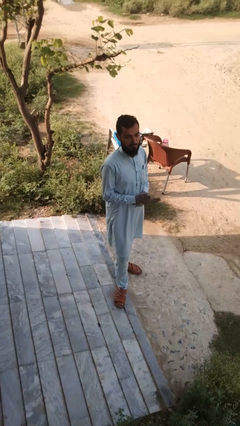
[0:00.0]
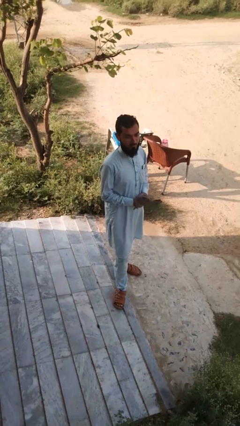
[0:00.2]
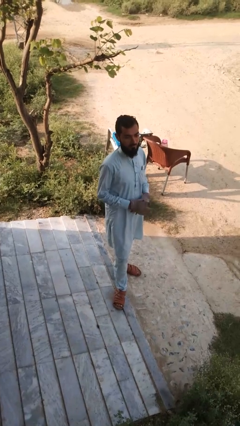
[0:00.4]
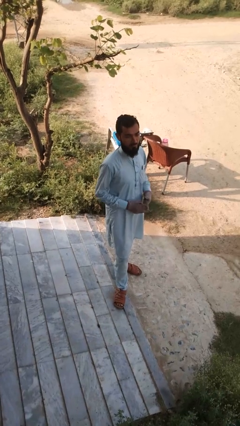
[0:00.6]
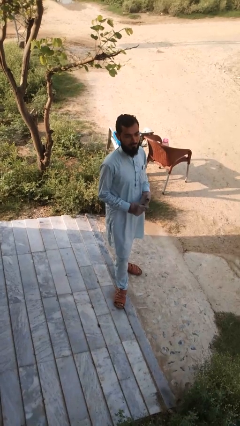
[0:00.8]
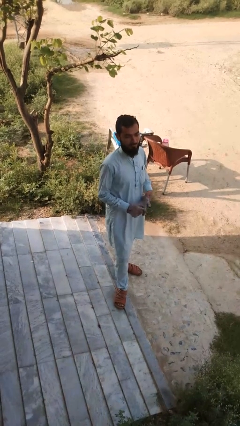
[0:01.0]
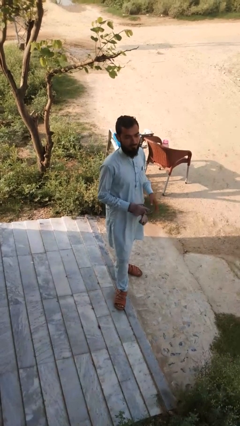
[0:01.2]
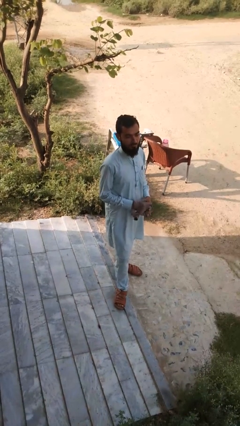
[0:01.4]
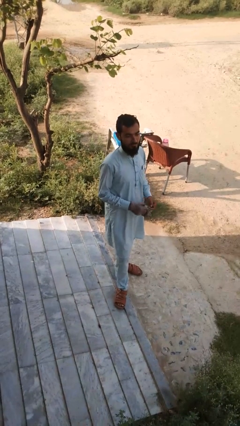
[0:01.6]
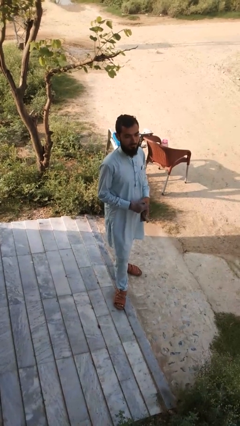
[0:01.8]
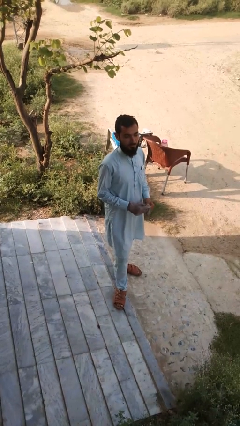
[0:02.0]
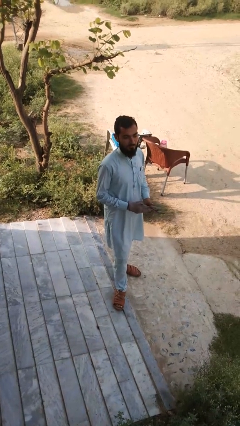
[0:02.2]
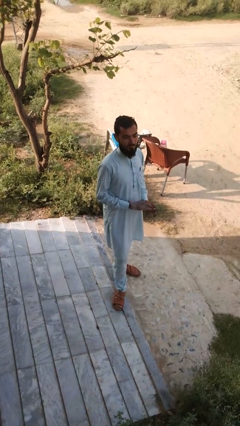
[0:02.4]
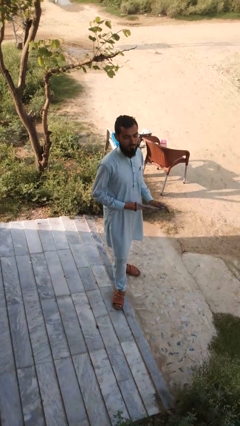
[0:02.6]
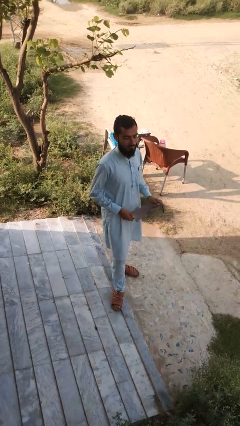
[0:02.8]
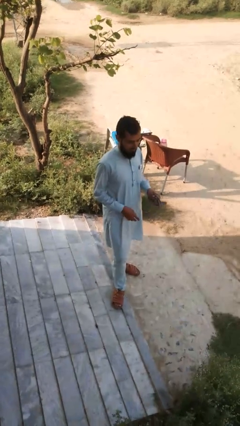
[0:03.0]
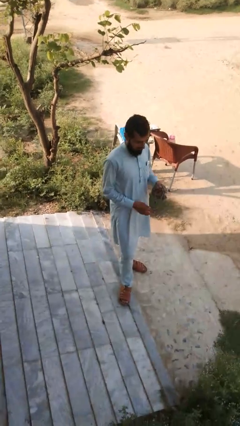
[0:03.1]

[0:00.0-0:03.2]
person takes off gloves

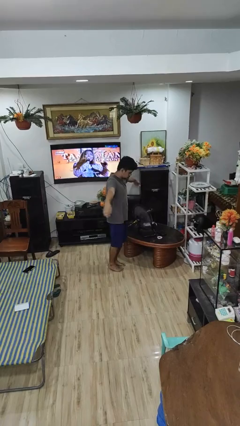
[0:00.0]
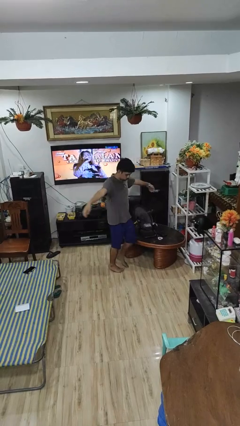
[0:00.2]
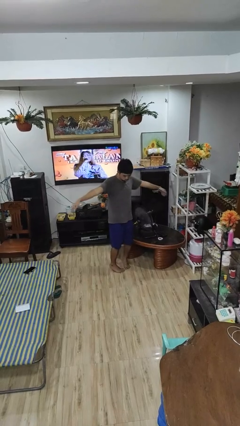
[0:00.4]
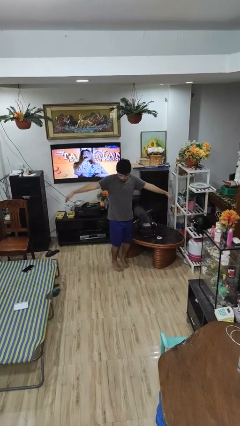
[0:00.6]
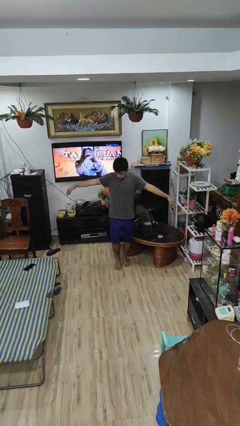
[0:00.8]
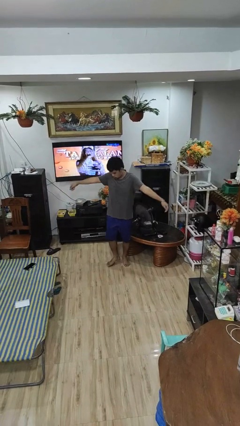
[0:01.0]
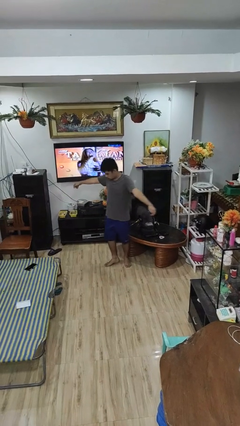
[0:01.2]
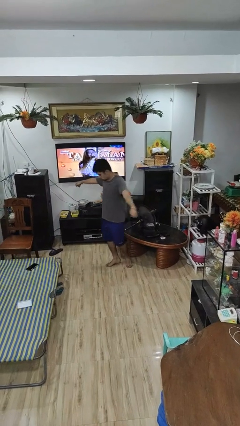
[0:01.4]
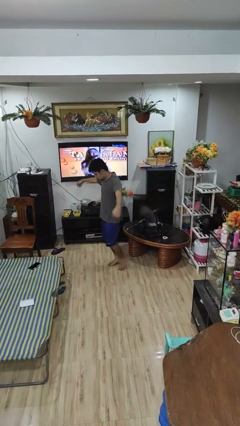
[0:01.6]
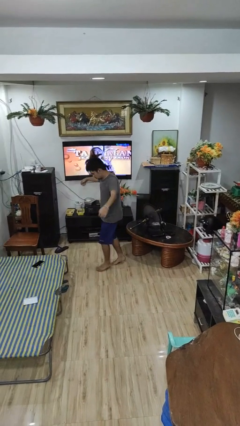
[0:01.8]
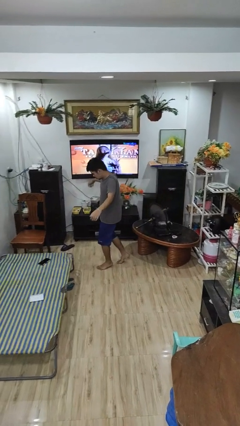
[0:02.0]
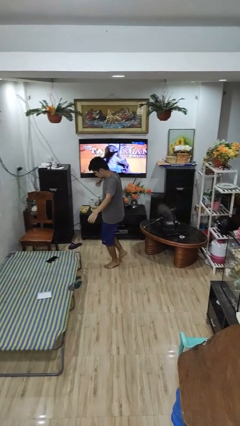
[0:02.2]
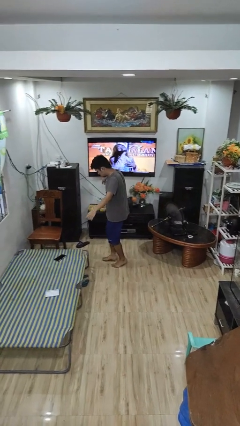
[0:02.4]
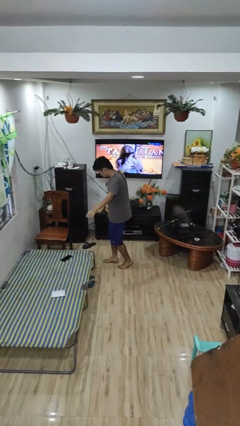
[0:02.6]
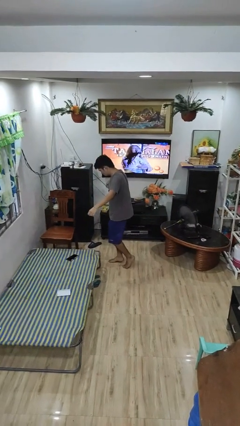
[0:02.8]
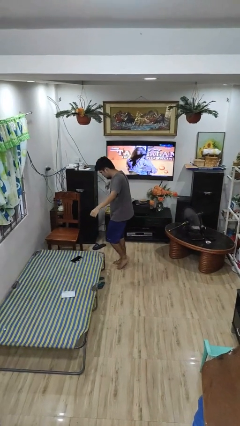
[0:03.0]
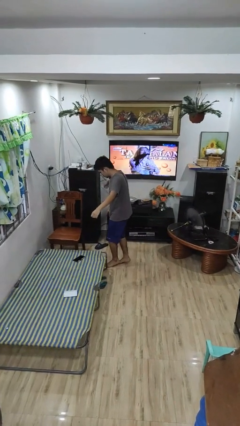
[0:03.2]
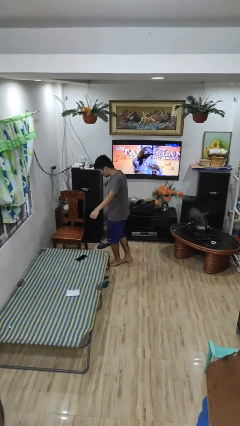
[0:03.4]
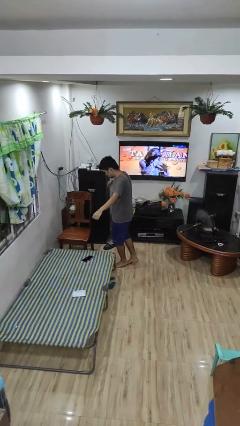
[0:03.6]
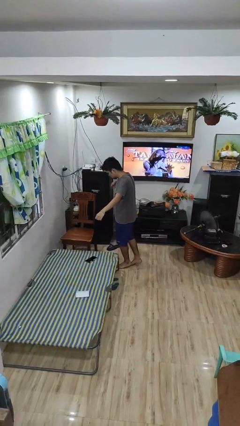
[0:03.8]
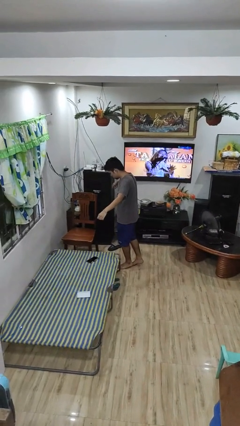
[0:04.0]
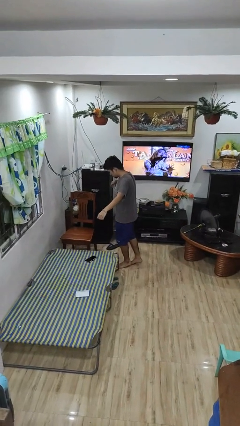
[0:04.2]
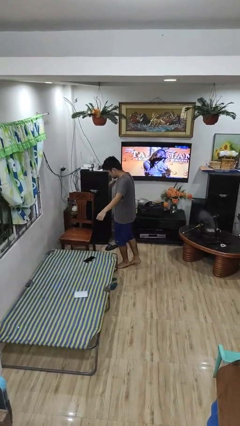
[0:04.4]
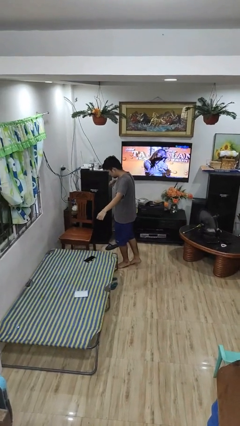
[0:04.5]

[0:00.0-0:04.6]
person walks tiptoe

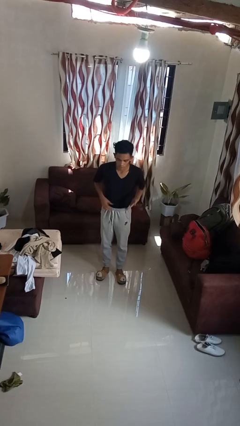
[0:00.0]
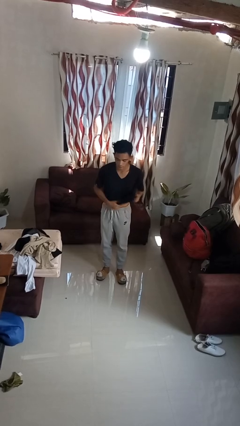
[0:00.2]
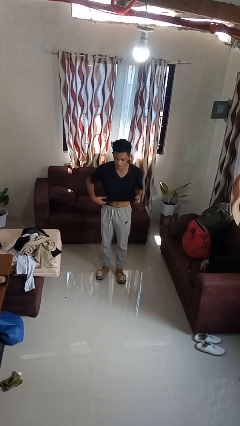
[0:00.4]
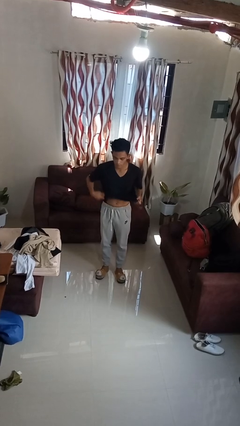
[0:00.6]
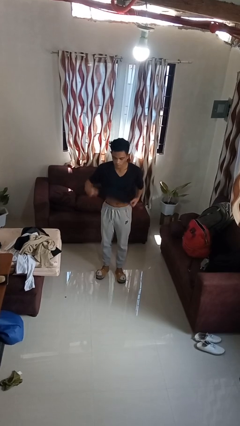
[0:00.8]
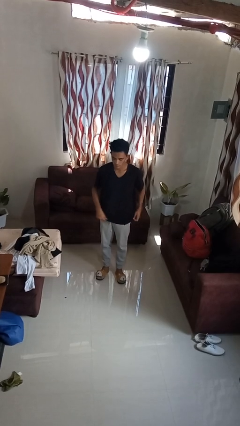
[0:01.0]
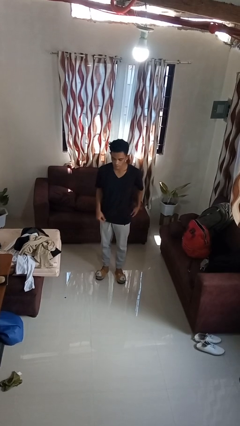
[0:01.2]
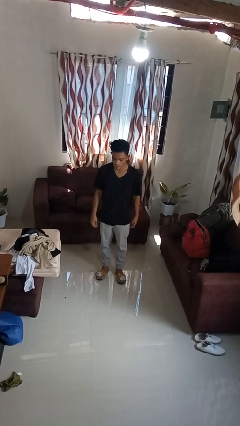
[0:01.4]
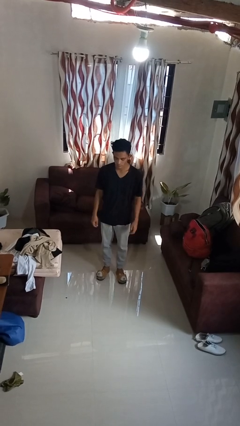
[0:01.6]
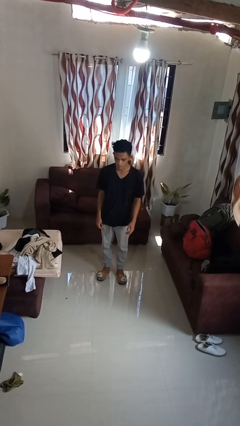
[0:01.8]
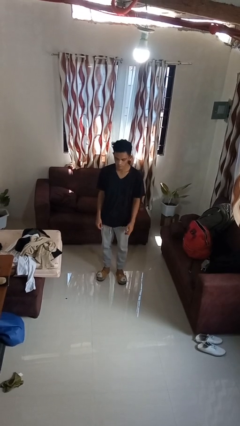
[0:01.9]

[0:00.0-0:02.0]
person untucks shirt

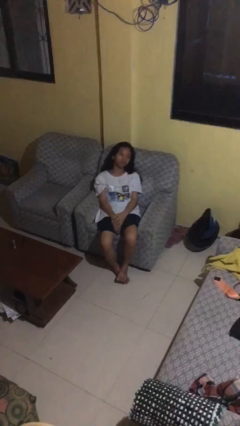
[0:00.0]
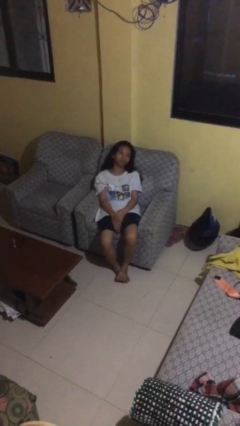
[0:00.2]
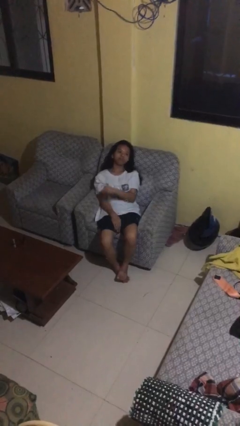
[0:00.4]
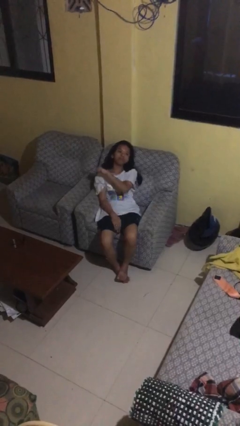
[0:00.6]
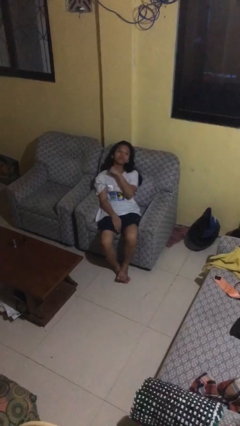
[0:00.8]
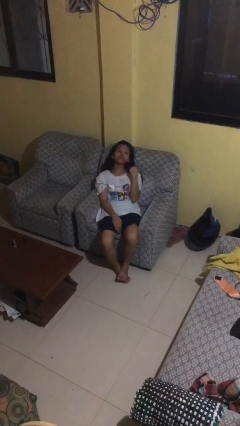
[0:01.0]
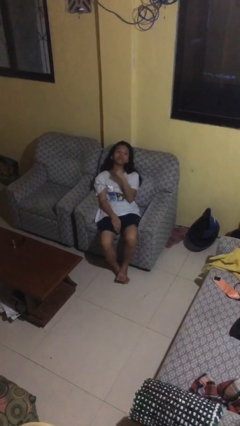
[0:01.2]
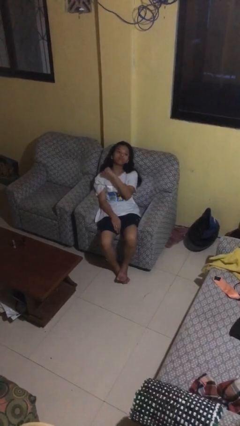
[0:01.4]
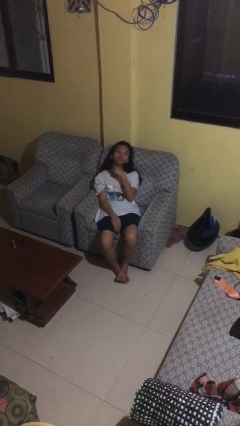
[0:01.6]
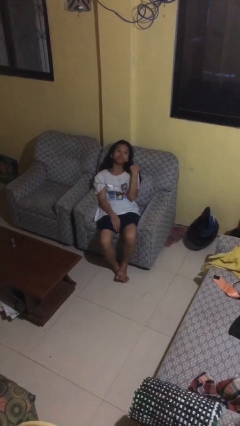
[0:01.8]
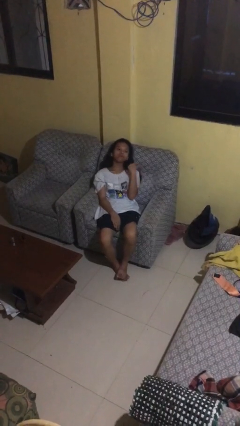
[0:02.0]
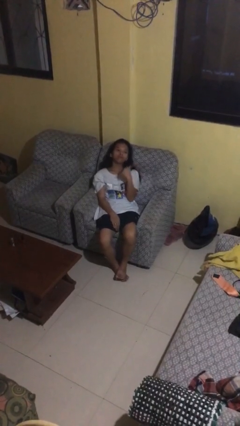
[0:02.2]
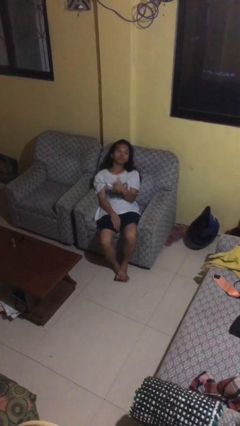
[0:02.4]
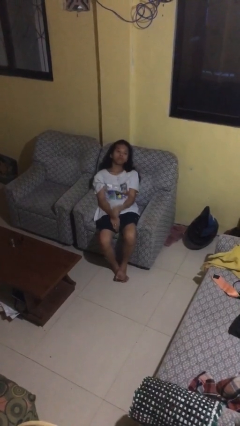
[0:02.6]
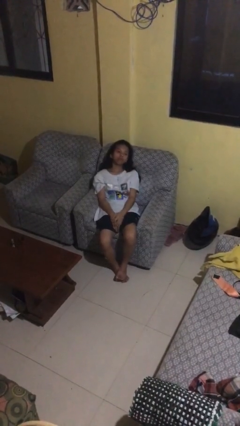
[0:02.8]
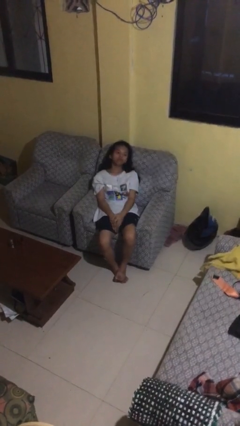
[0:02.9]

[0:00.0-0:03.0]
person gestures cut

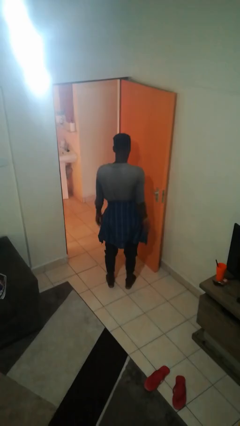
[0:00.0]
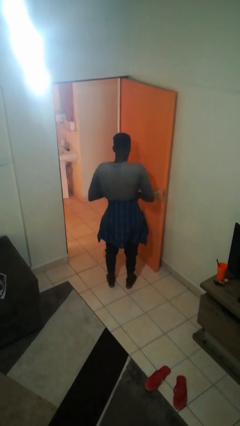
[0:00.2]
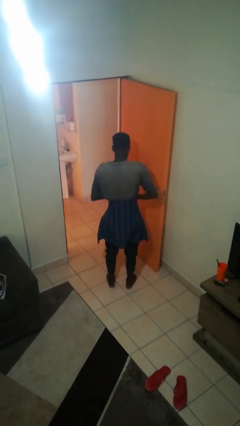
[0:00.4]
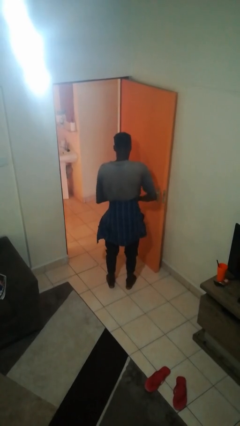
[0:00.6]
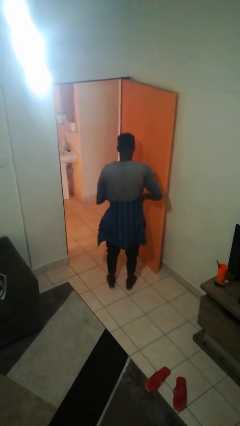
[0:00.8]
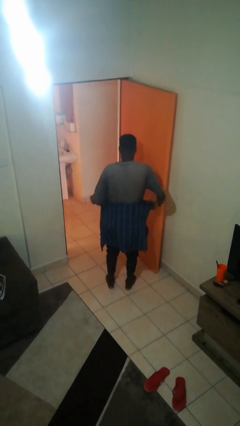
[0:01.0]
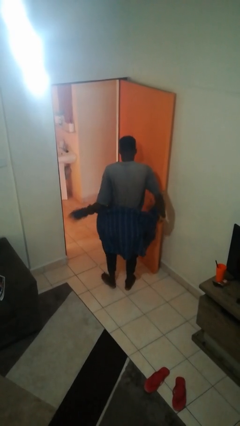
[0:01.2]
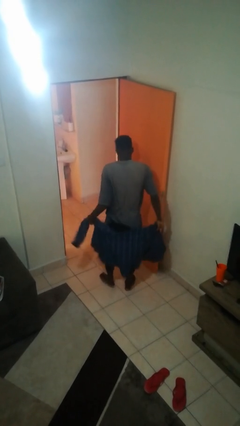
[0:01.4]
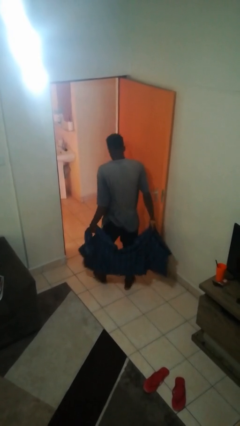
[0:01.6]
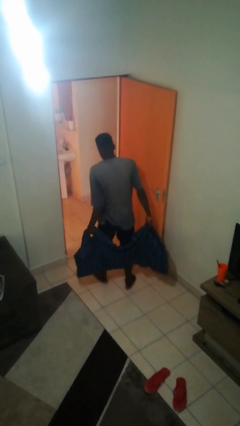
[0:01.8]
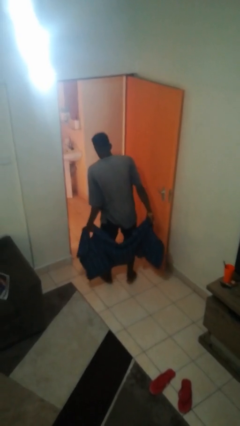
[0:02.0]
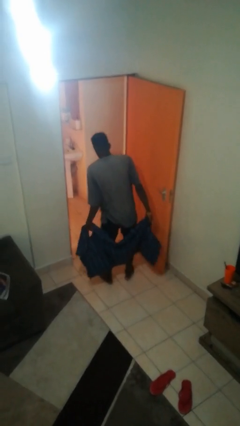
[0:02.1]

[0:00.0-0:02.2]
person unties jacket around waist

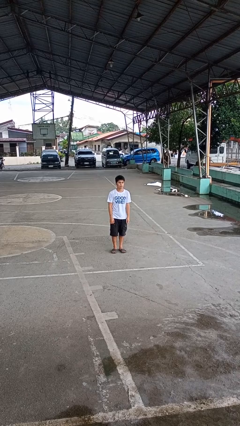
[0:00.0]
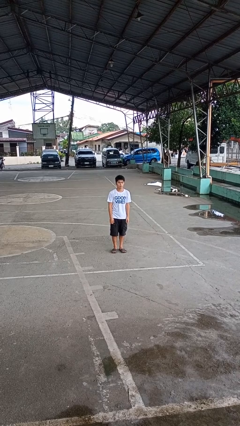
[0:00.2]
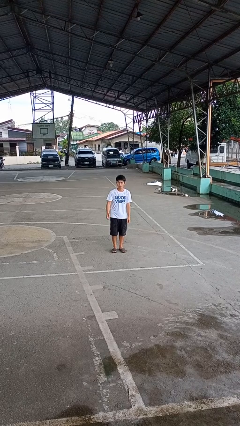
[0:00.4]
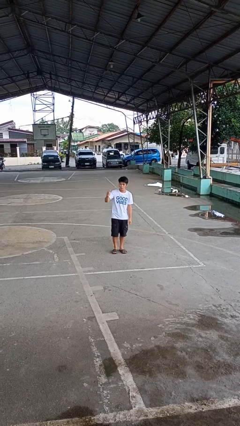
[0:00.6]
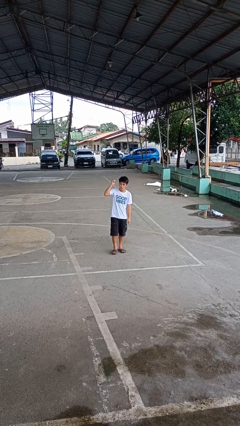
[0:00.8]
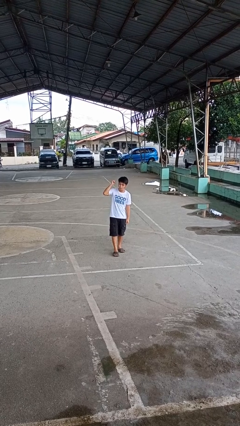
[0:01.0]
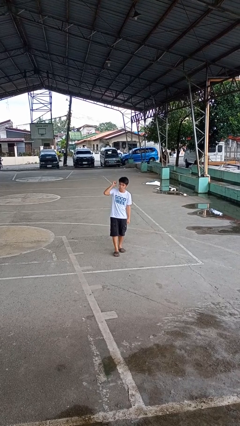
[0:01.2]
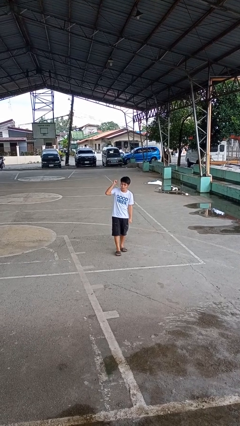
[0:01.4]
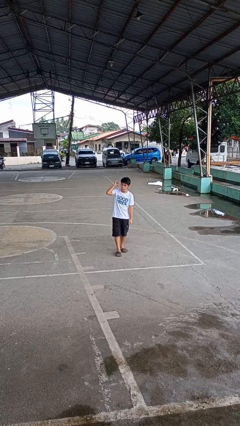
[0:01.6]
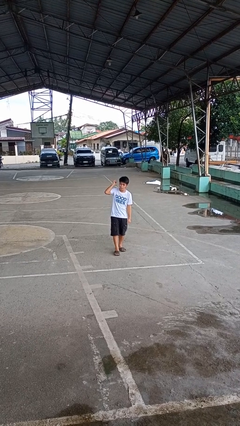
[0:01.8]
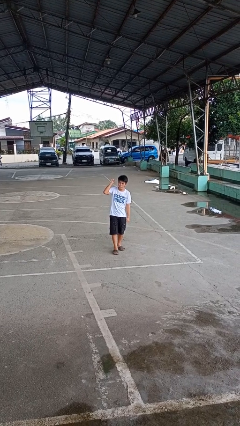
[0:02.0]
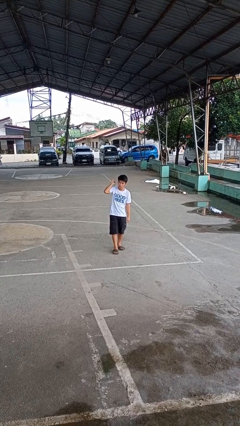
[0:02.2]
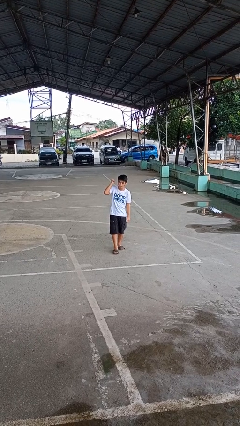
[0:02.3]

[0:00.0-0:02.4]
person gestures behind me
